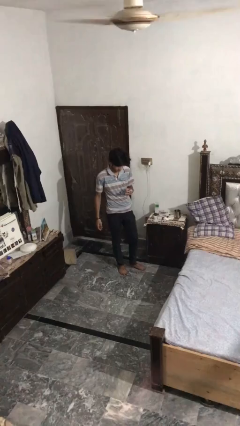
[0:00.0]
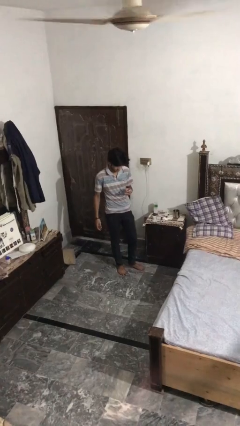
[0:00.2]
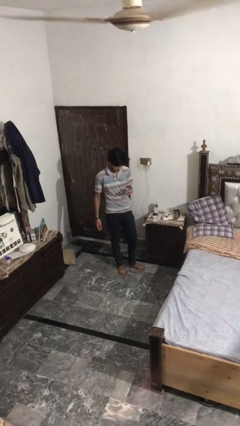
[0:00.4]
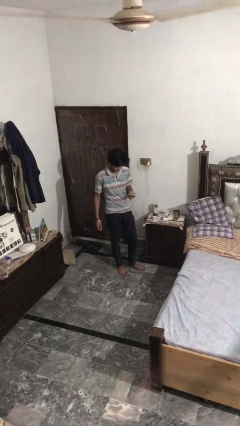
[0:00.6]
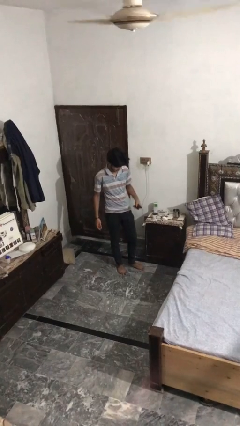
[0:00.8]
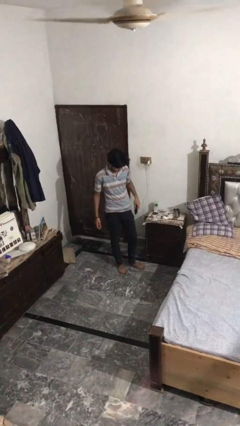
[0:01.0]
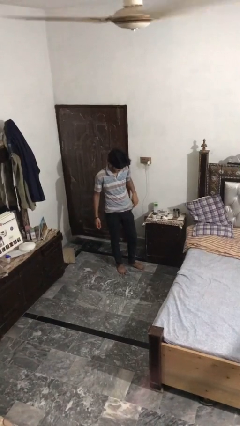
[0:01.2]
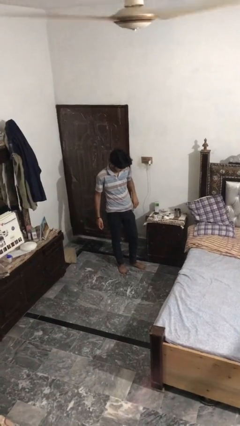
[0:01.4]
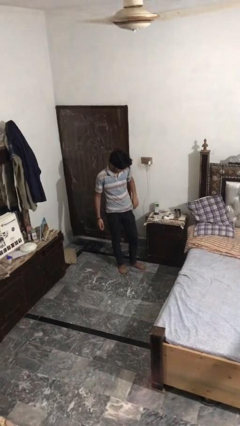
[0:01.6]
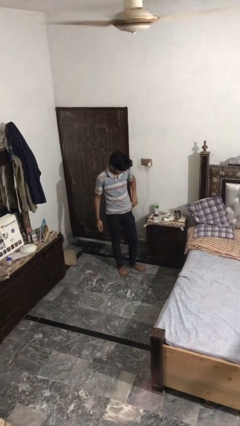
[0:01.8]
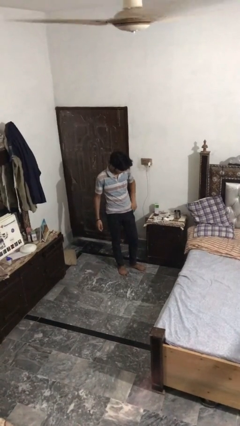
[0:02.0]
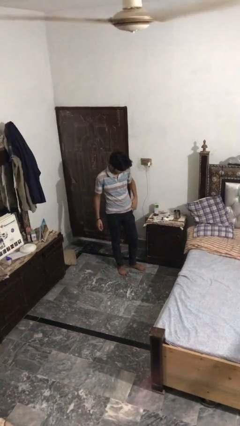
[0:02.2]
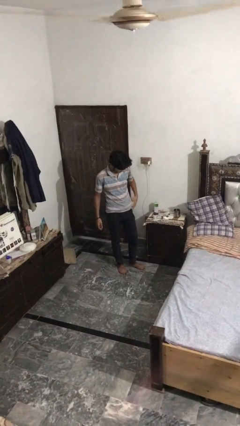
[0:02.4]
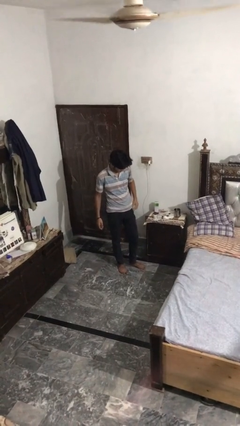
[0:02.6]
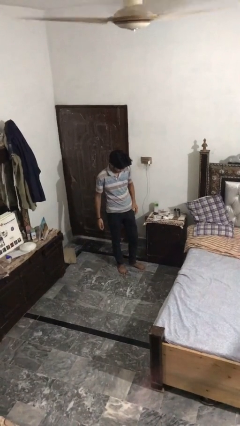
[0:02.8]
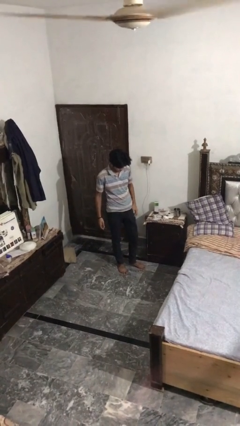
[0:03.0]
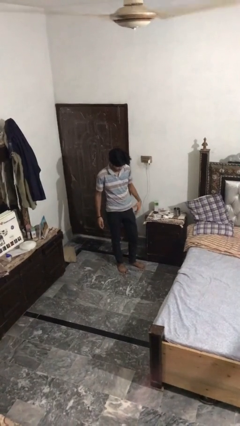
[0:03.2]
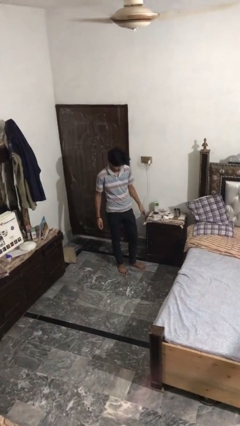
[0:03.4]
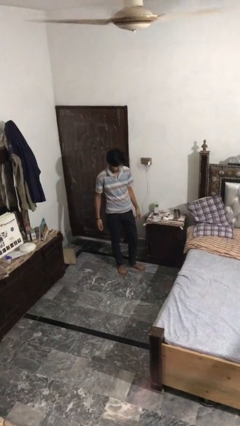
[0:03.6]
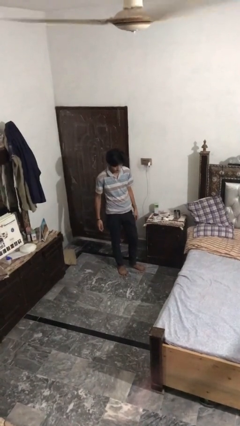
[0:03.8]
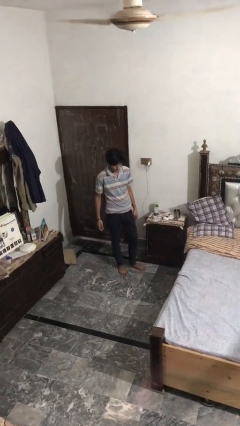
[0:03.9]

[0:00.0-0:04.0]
person puts phone into pocket

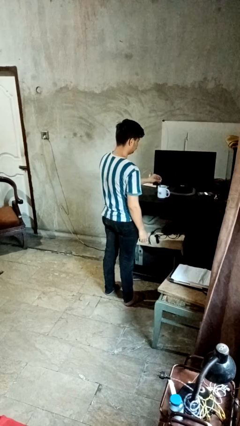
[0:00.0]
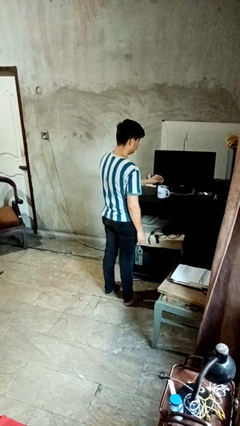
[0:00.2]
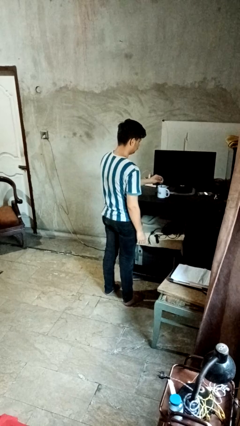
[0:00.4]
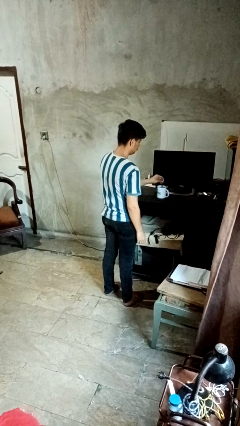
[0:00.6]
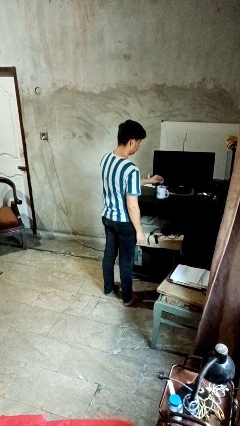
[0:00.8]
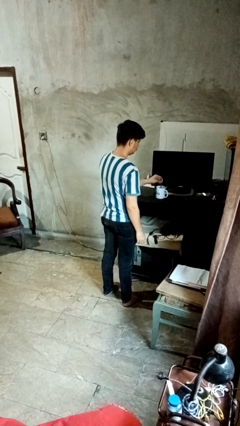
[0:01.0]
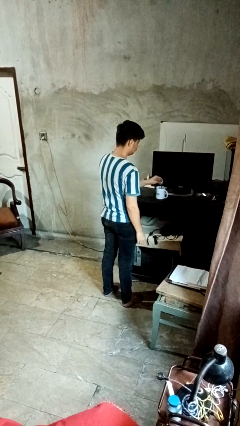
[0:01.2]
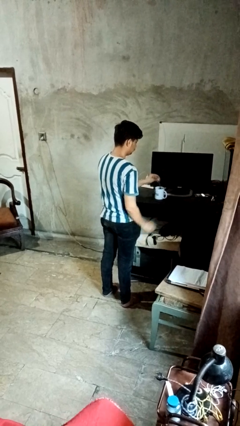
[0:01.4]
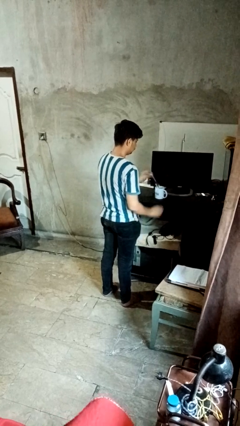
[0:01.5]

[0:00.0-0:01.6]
person stirs mug

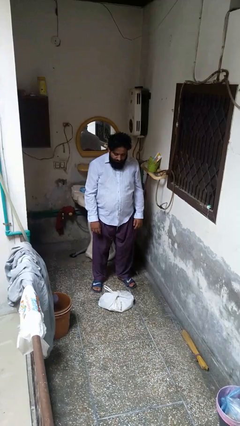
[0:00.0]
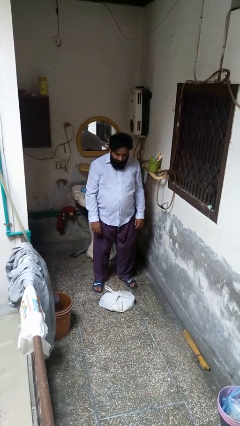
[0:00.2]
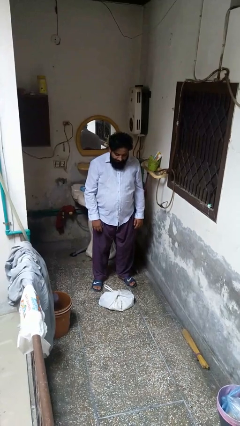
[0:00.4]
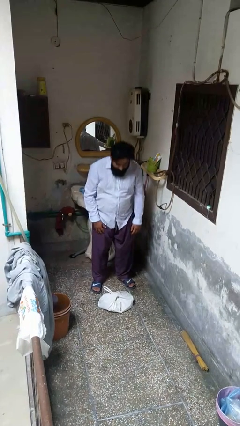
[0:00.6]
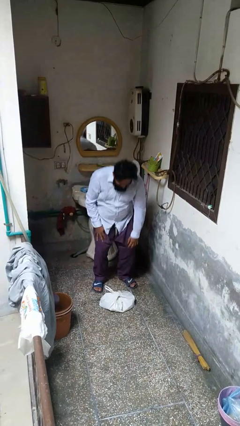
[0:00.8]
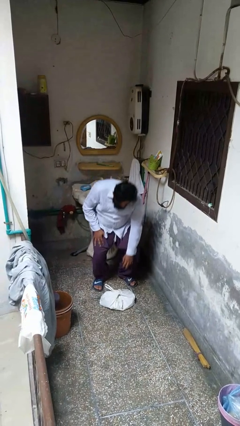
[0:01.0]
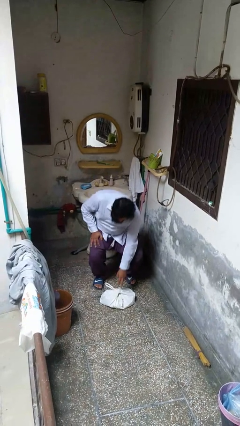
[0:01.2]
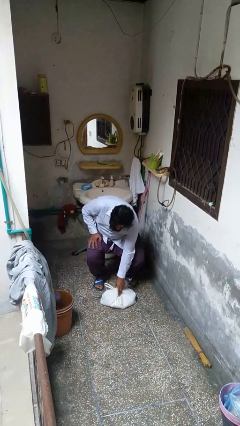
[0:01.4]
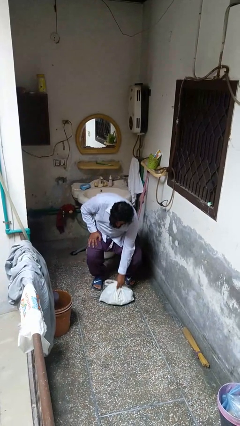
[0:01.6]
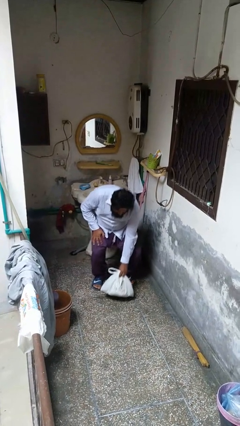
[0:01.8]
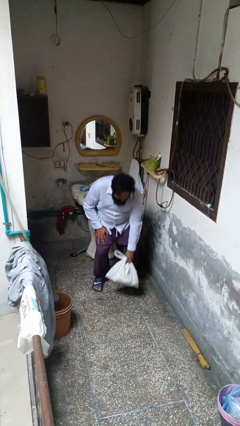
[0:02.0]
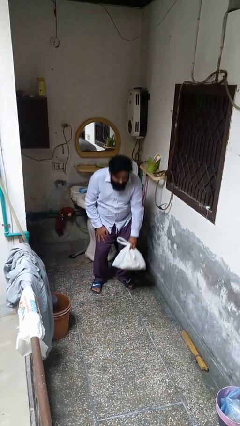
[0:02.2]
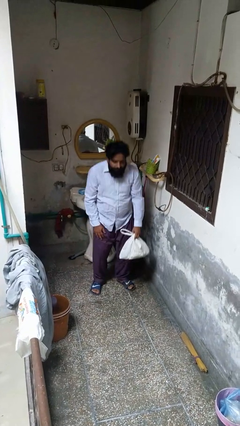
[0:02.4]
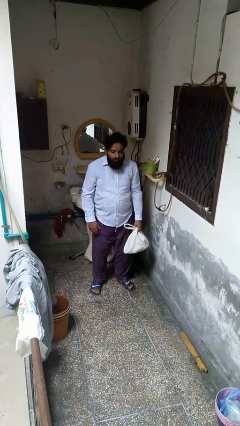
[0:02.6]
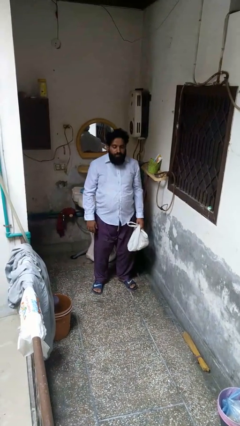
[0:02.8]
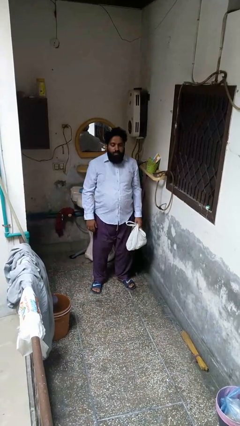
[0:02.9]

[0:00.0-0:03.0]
person picks up object from floor

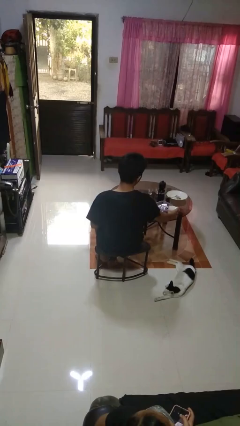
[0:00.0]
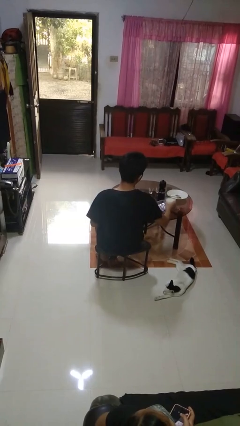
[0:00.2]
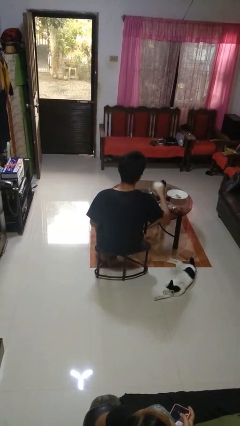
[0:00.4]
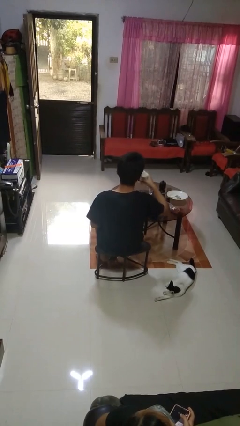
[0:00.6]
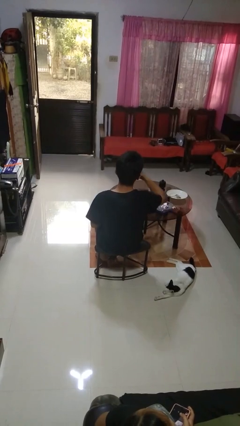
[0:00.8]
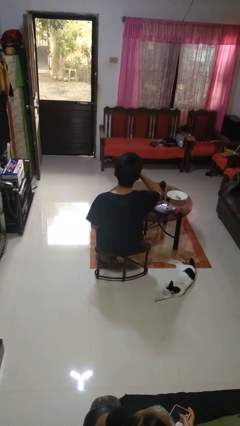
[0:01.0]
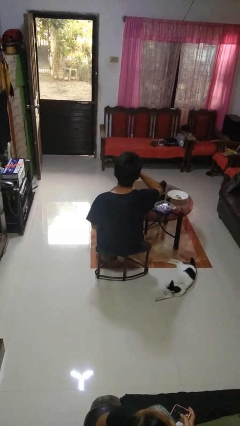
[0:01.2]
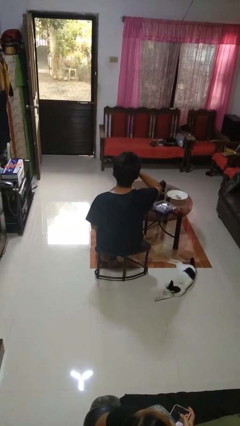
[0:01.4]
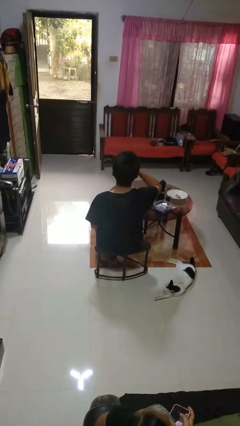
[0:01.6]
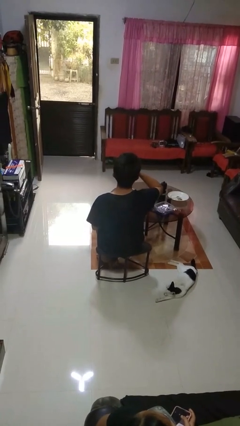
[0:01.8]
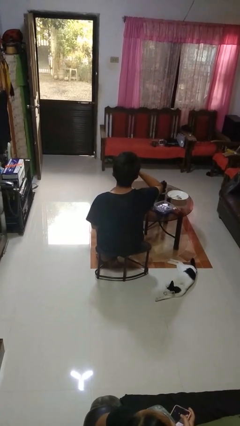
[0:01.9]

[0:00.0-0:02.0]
person drinks from cup

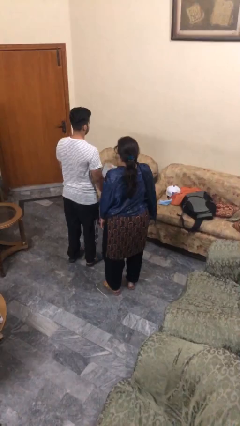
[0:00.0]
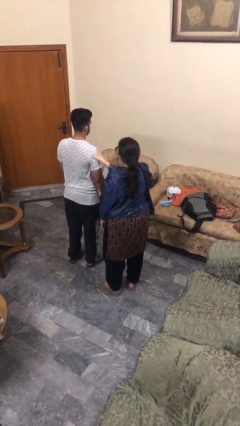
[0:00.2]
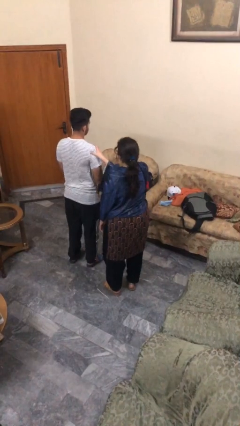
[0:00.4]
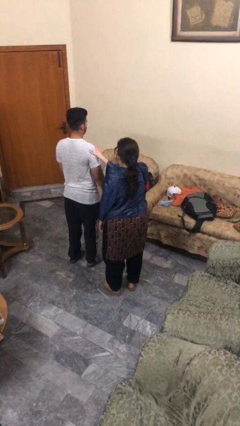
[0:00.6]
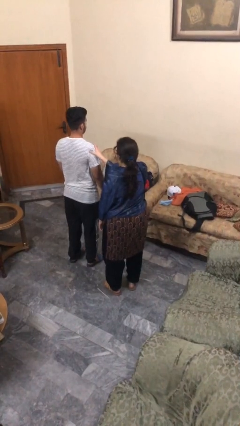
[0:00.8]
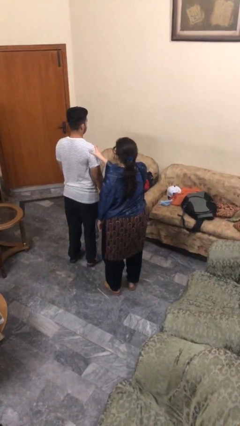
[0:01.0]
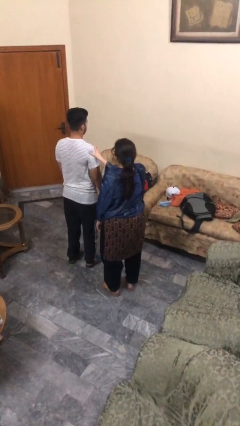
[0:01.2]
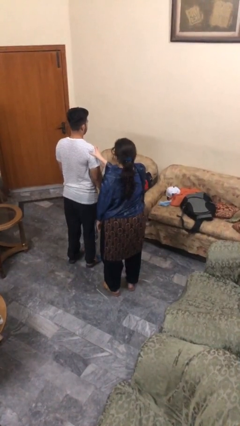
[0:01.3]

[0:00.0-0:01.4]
person grabs person by shoulder

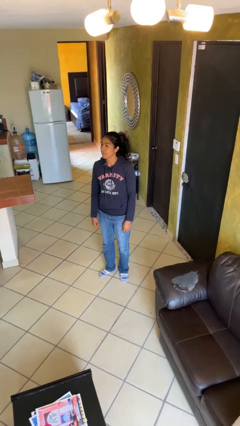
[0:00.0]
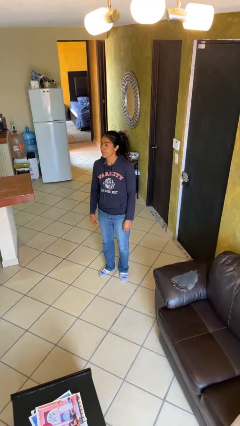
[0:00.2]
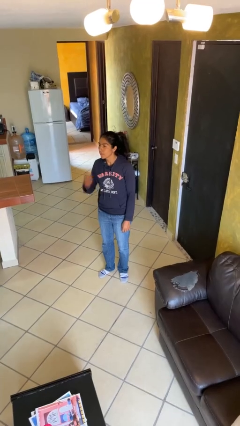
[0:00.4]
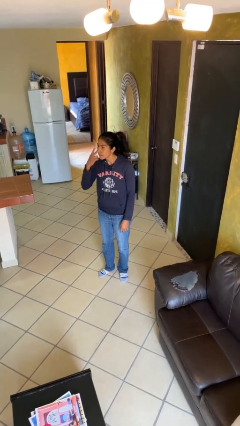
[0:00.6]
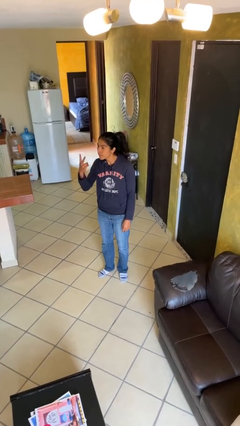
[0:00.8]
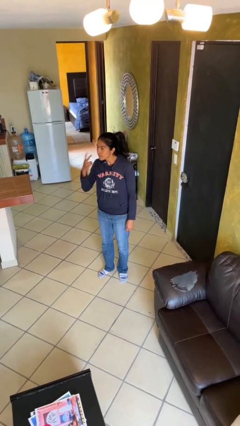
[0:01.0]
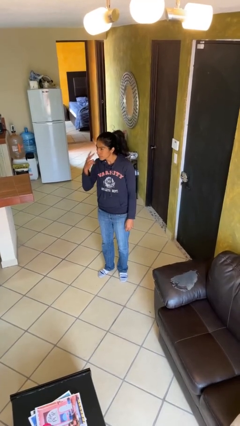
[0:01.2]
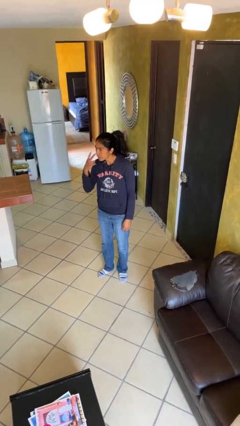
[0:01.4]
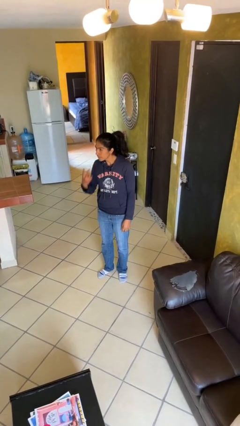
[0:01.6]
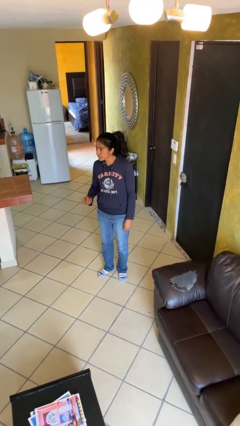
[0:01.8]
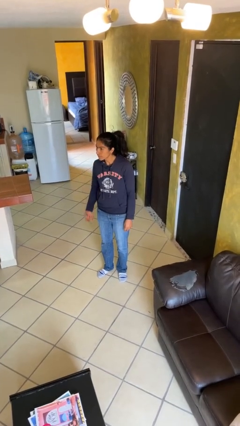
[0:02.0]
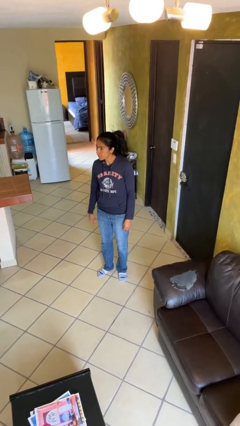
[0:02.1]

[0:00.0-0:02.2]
person gestures watch closely

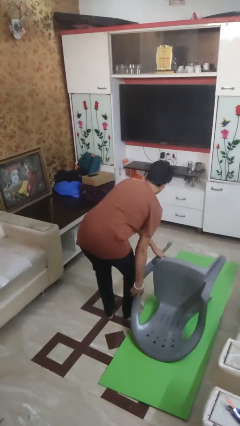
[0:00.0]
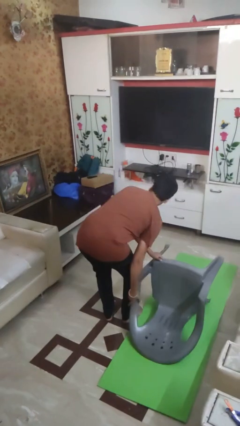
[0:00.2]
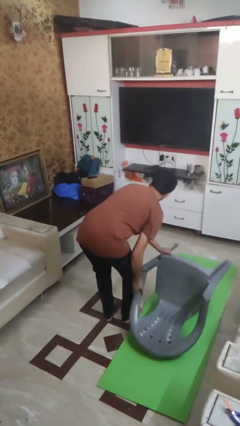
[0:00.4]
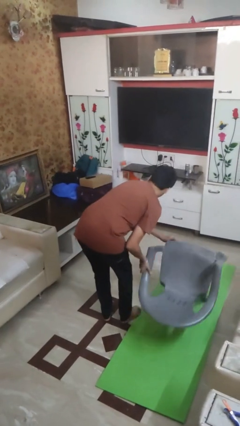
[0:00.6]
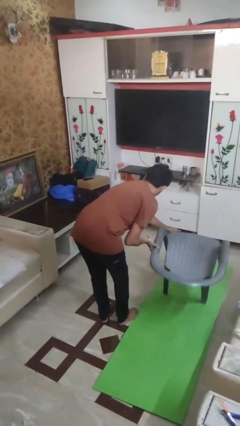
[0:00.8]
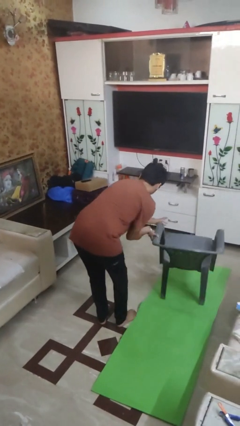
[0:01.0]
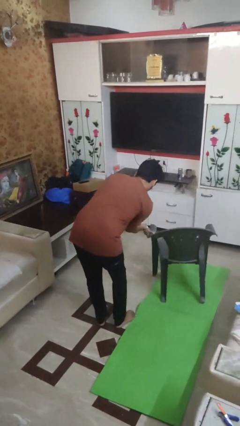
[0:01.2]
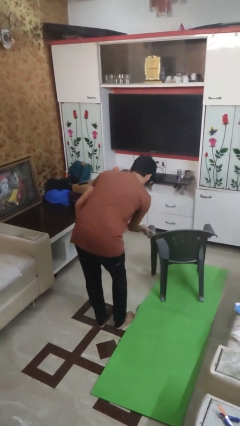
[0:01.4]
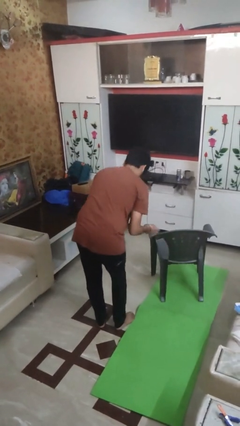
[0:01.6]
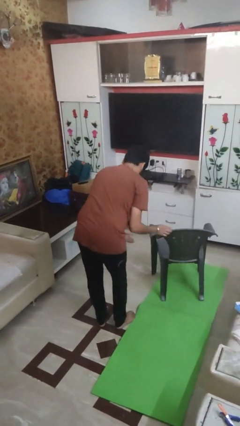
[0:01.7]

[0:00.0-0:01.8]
person sets upright furniture

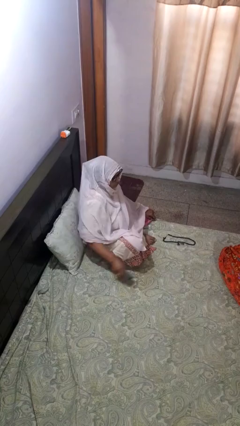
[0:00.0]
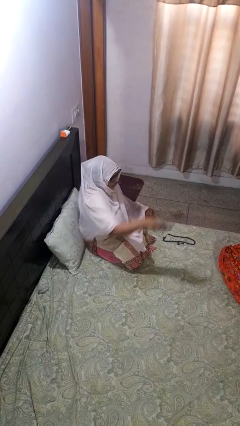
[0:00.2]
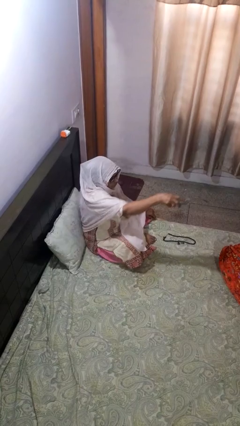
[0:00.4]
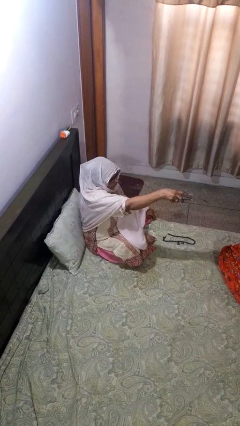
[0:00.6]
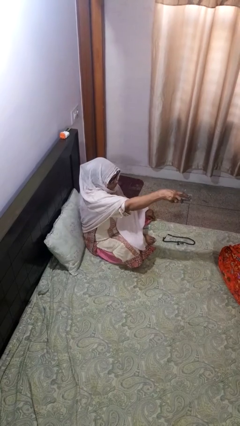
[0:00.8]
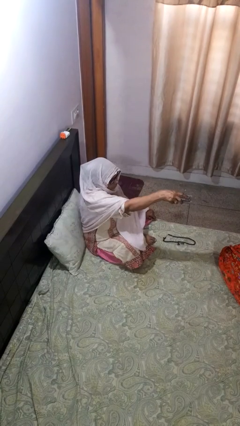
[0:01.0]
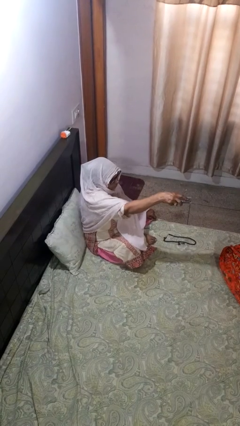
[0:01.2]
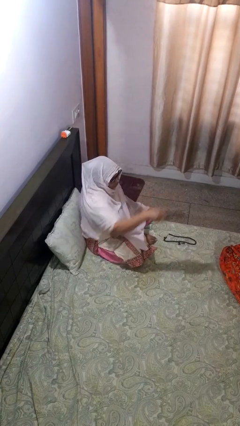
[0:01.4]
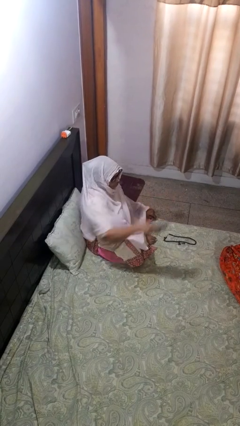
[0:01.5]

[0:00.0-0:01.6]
person uses television remote
